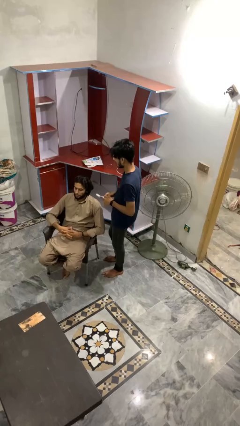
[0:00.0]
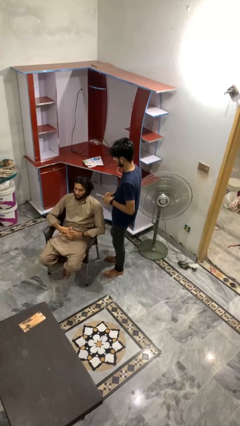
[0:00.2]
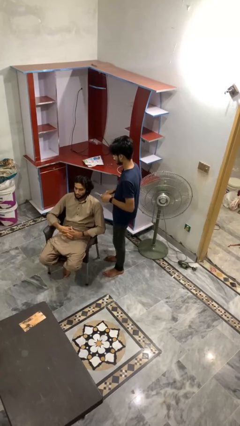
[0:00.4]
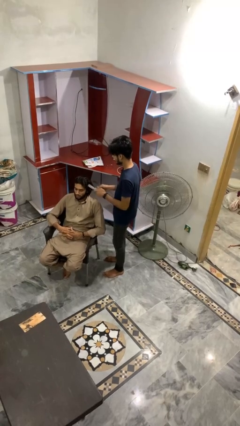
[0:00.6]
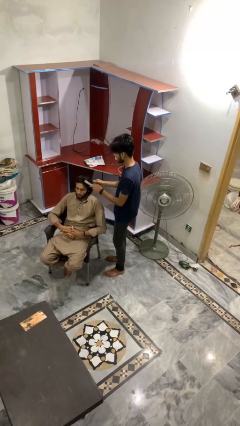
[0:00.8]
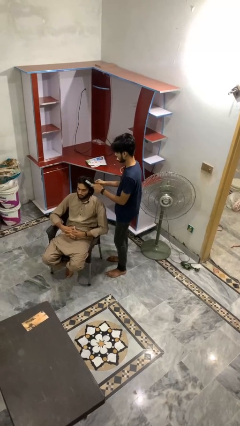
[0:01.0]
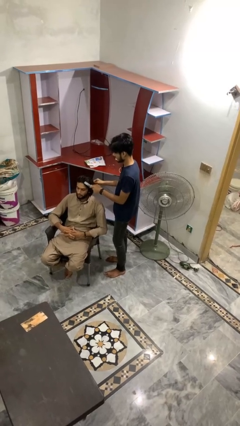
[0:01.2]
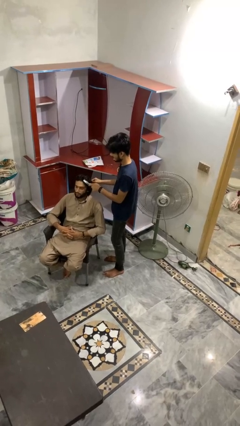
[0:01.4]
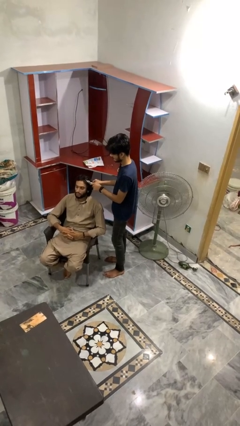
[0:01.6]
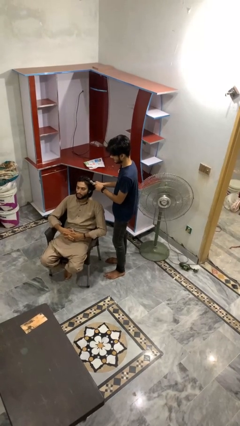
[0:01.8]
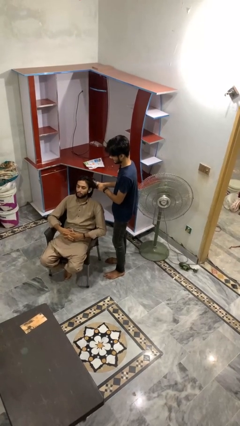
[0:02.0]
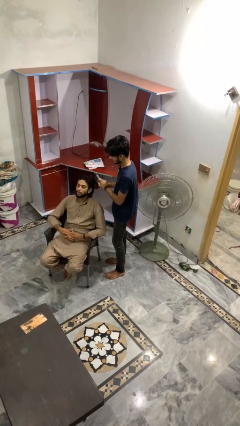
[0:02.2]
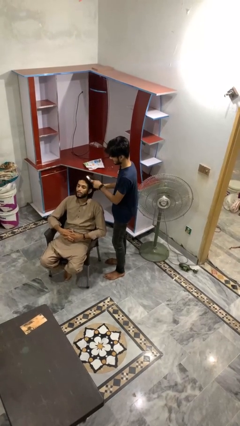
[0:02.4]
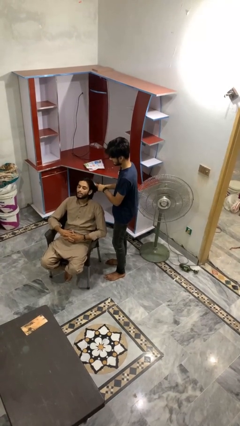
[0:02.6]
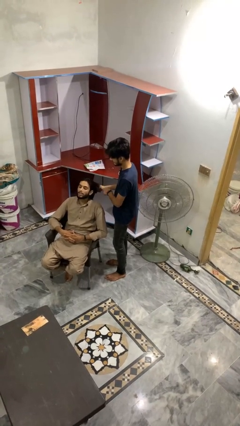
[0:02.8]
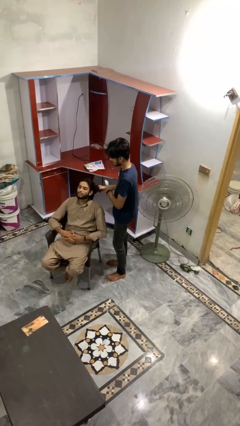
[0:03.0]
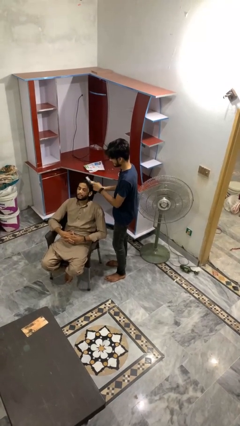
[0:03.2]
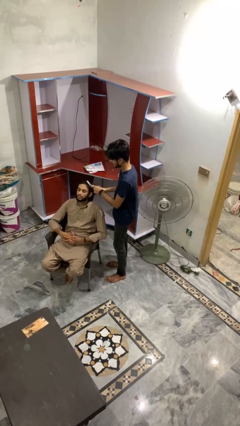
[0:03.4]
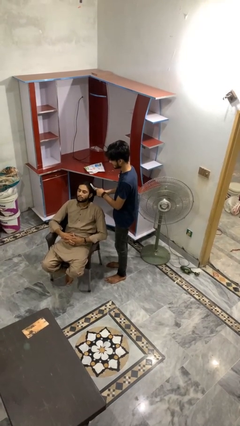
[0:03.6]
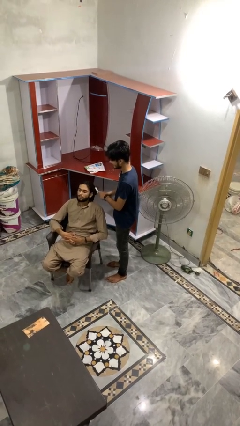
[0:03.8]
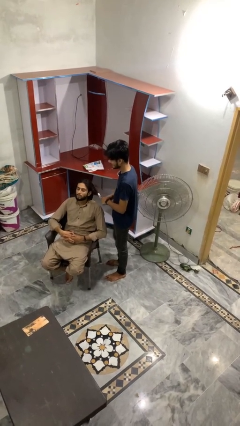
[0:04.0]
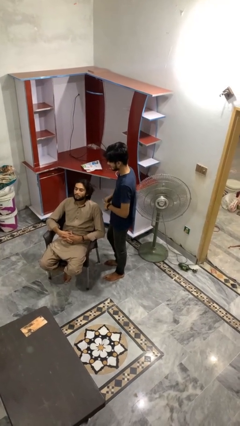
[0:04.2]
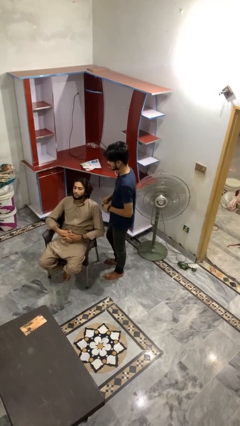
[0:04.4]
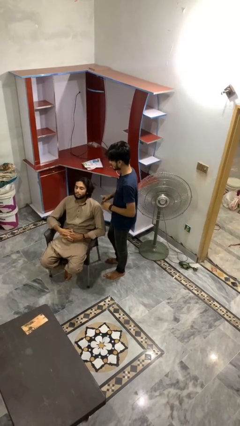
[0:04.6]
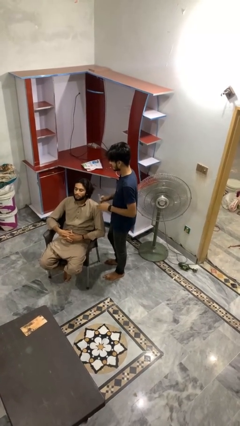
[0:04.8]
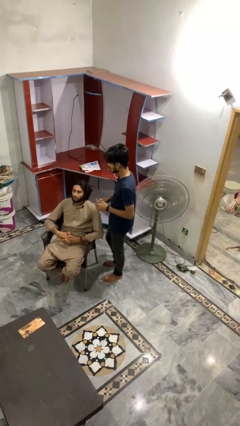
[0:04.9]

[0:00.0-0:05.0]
person brushes hair of person

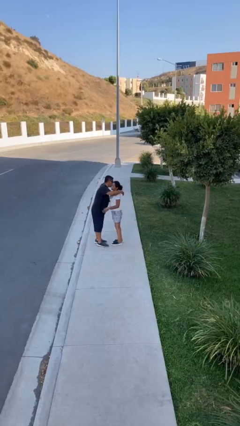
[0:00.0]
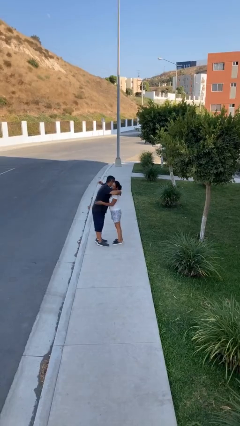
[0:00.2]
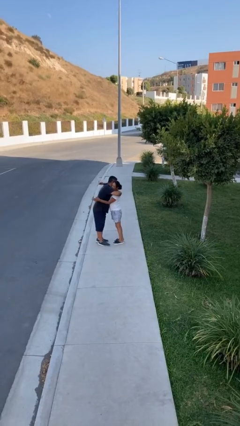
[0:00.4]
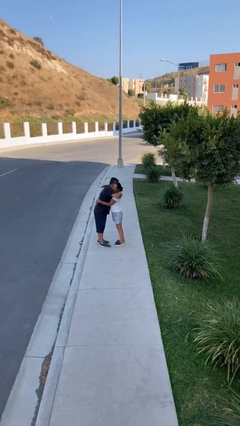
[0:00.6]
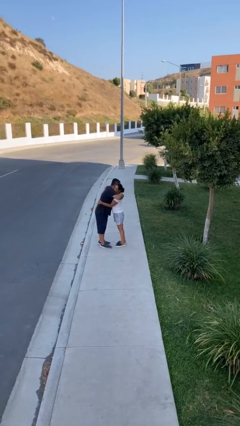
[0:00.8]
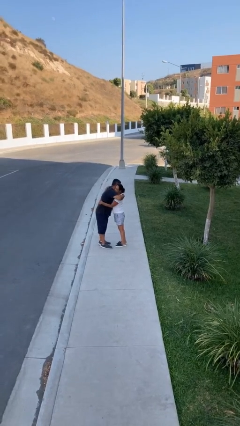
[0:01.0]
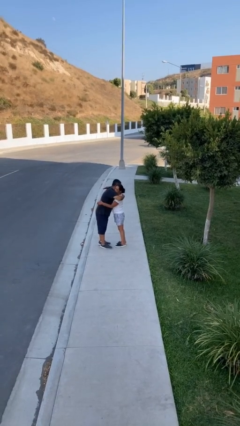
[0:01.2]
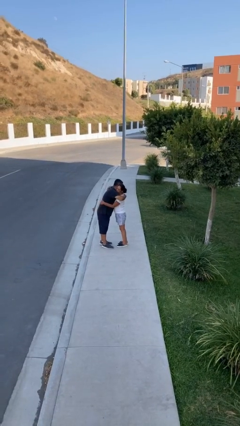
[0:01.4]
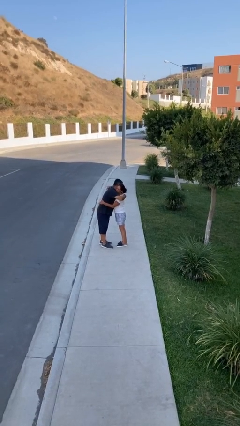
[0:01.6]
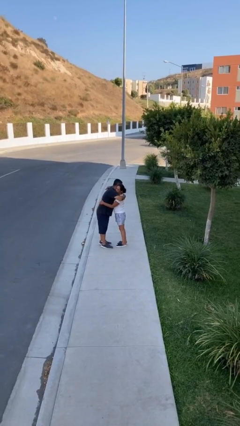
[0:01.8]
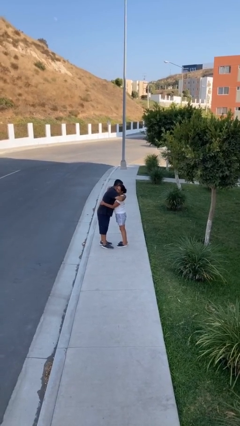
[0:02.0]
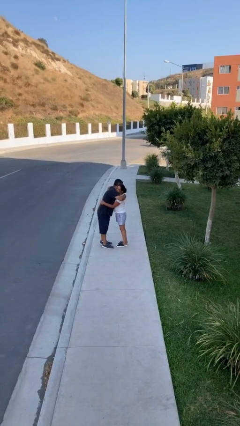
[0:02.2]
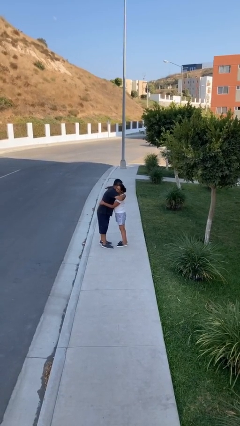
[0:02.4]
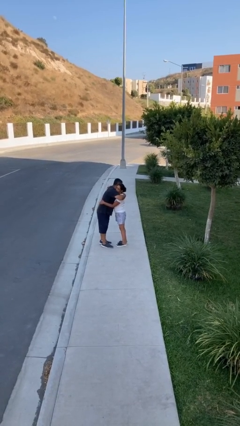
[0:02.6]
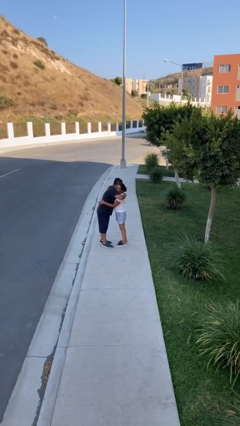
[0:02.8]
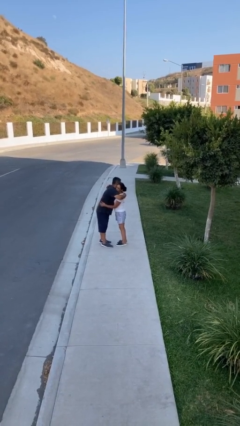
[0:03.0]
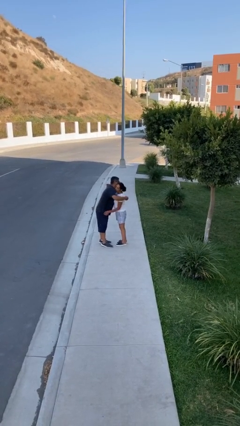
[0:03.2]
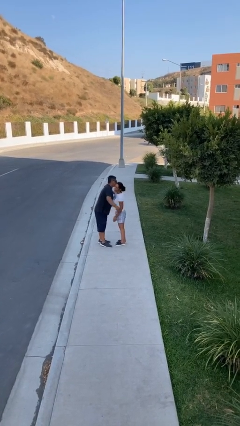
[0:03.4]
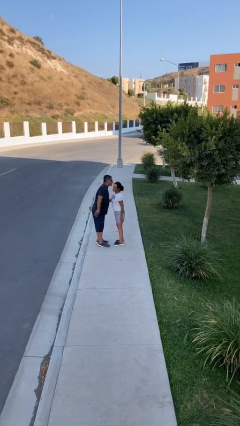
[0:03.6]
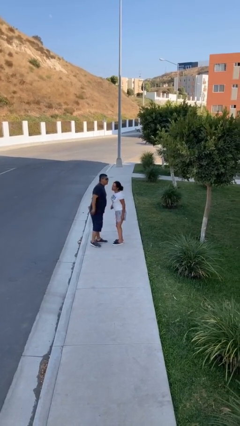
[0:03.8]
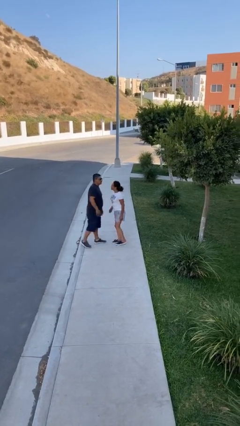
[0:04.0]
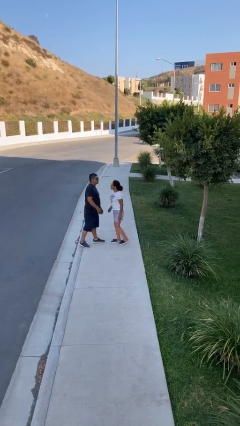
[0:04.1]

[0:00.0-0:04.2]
person embraces person

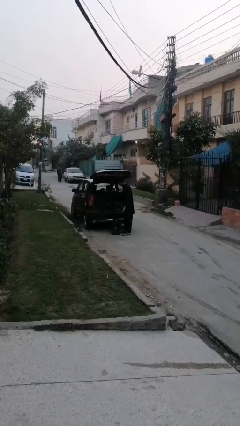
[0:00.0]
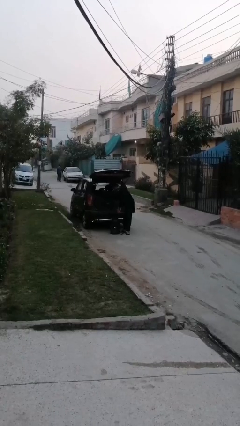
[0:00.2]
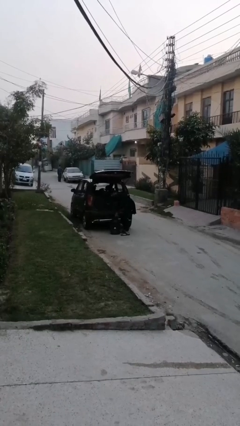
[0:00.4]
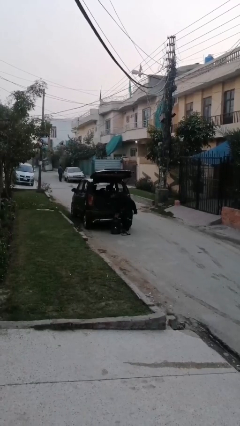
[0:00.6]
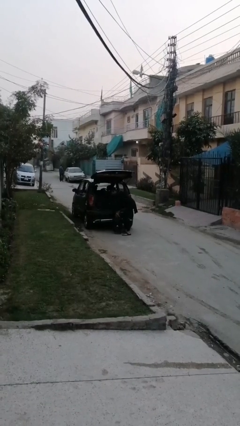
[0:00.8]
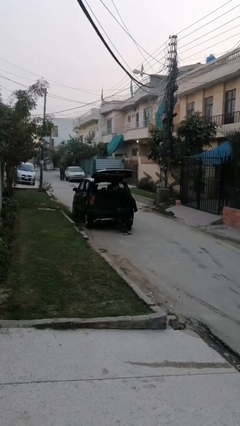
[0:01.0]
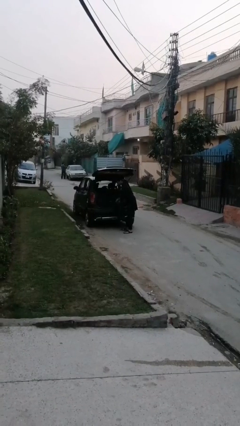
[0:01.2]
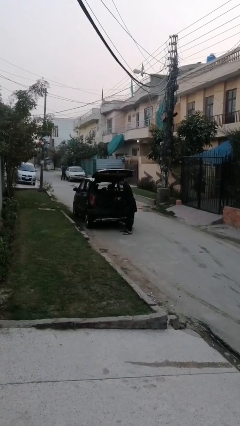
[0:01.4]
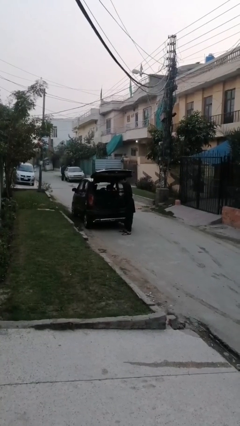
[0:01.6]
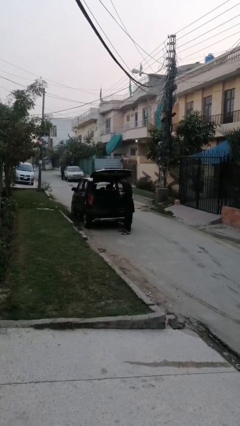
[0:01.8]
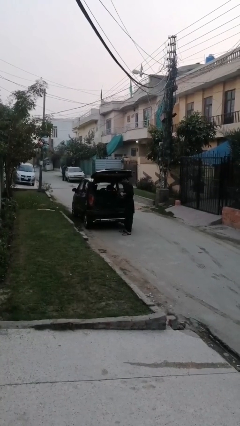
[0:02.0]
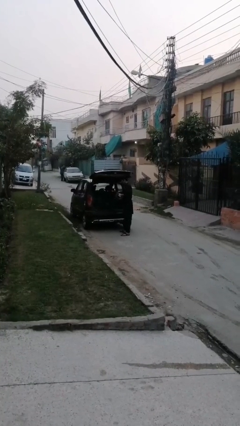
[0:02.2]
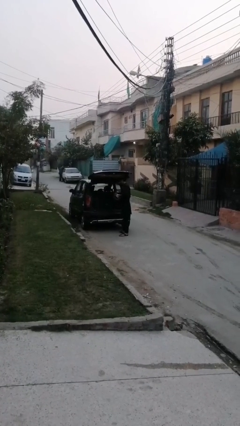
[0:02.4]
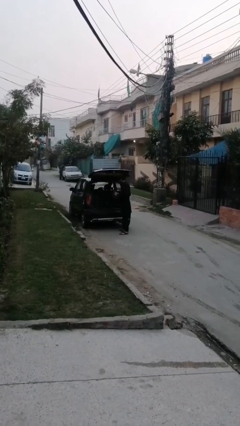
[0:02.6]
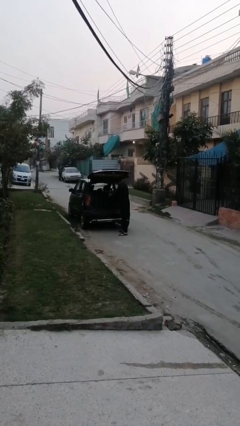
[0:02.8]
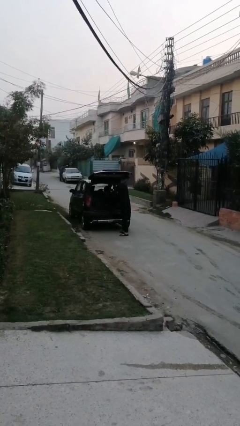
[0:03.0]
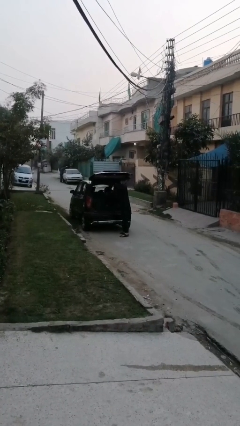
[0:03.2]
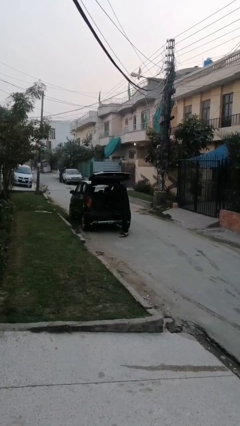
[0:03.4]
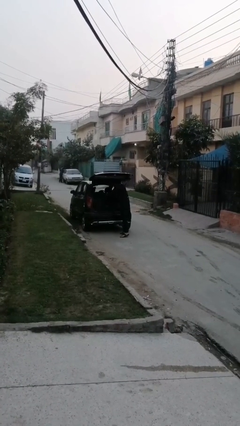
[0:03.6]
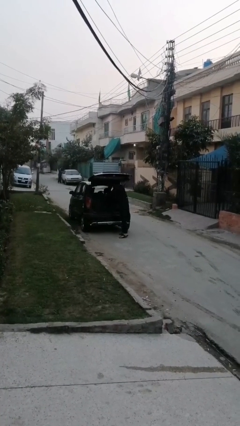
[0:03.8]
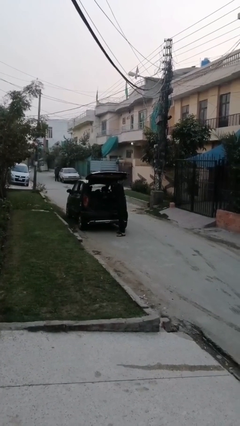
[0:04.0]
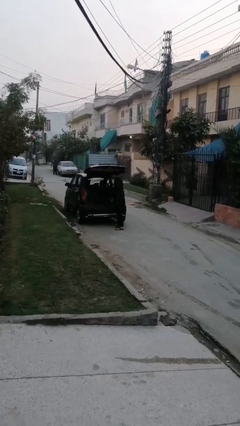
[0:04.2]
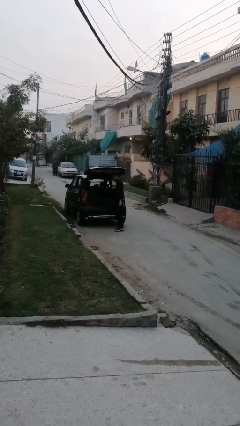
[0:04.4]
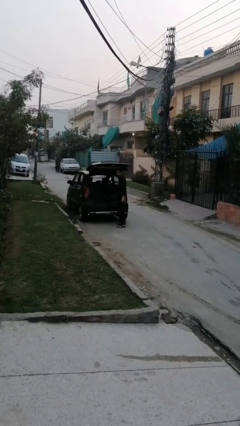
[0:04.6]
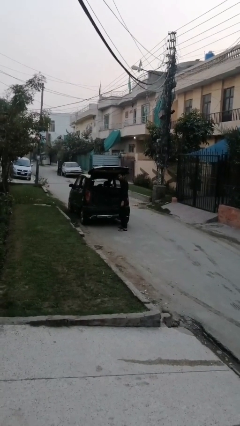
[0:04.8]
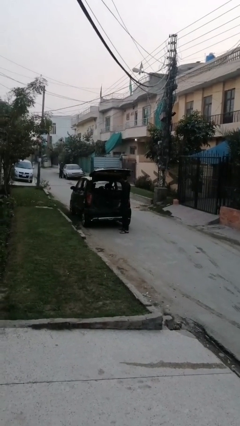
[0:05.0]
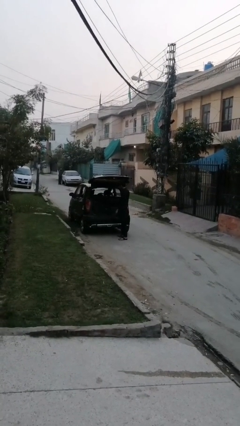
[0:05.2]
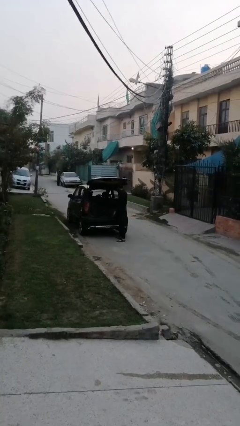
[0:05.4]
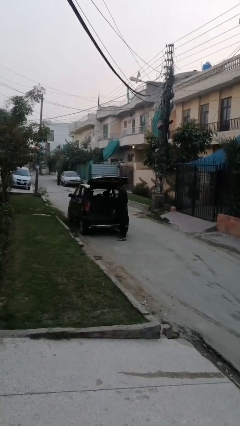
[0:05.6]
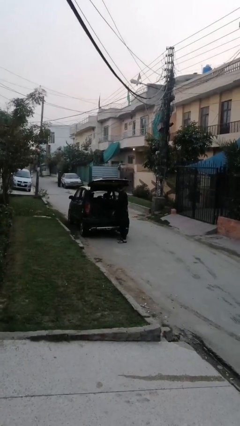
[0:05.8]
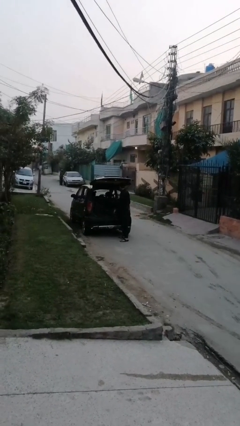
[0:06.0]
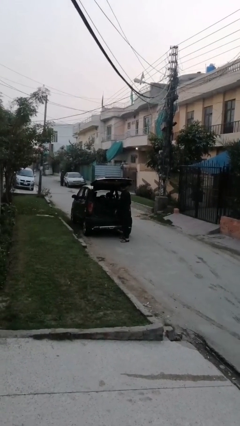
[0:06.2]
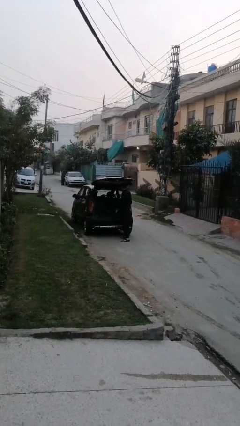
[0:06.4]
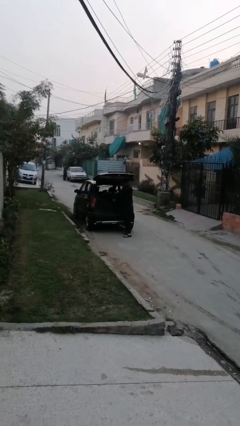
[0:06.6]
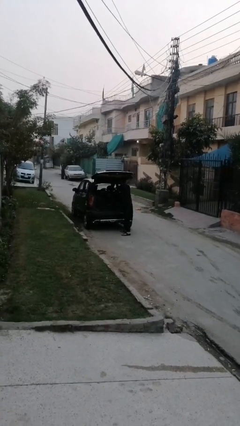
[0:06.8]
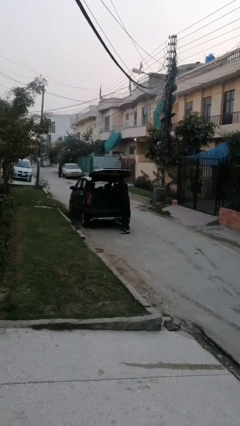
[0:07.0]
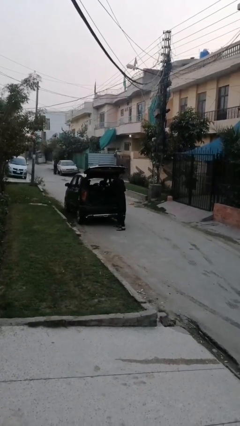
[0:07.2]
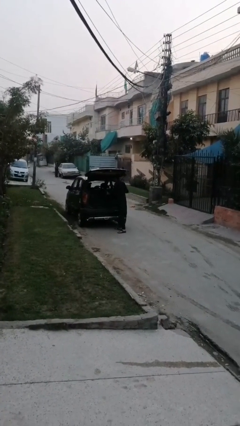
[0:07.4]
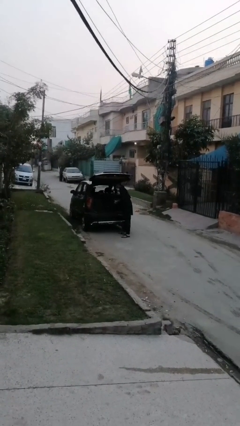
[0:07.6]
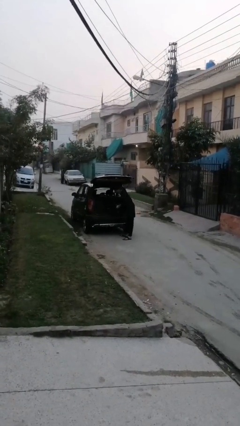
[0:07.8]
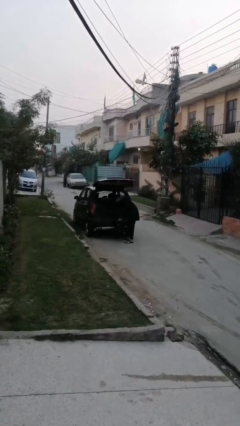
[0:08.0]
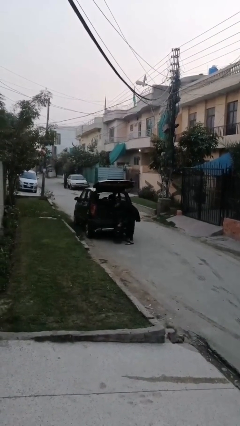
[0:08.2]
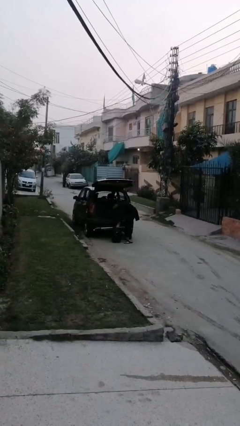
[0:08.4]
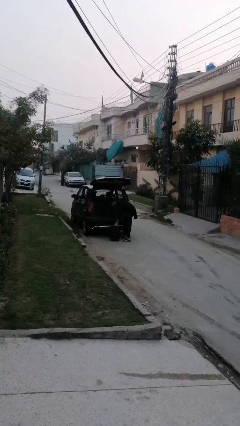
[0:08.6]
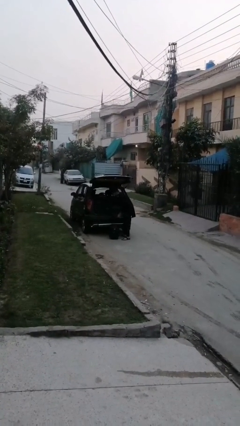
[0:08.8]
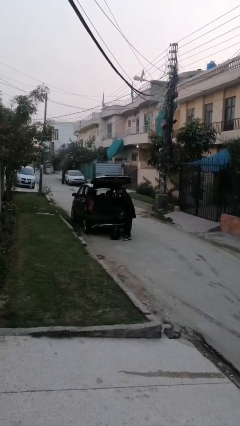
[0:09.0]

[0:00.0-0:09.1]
person loads car
